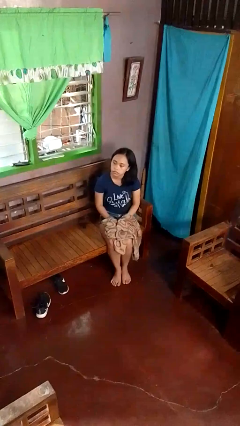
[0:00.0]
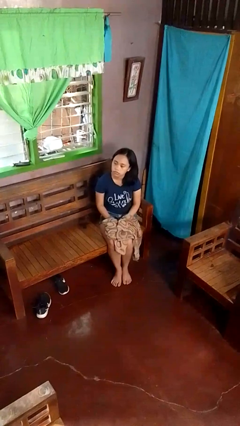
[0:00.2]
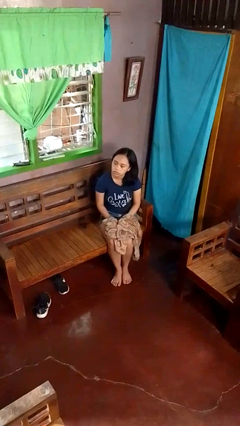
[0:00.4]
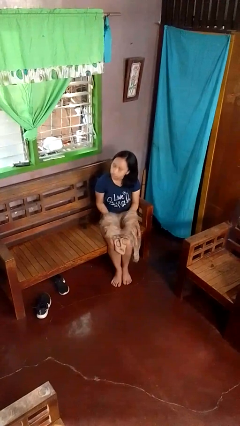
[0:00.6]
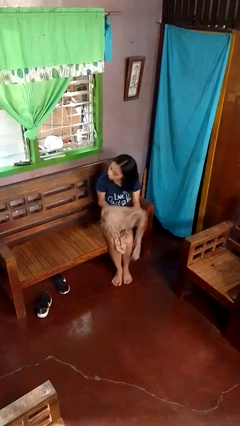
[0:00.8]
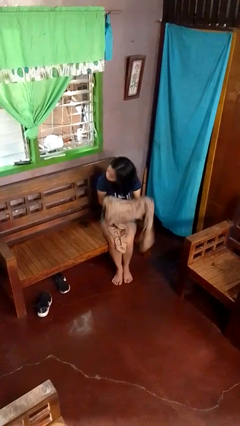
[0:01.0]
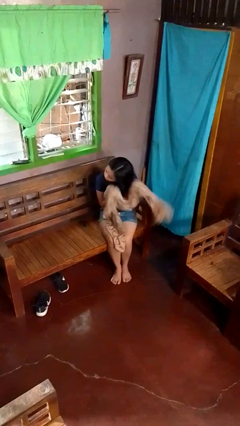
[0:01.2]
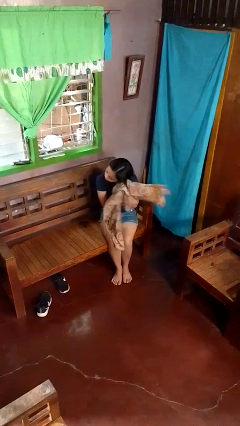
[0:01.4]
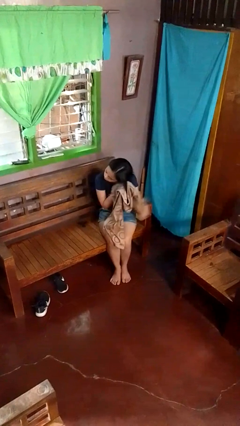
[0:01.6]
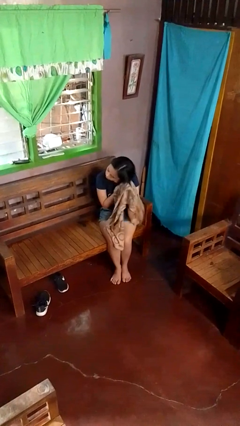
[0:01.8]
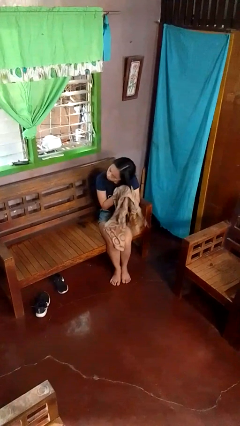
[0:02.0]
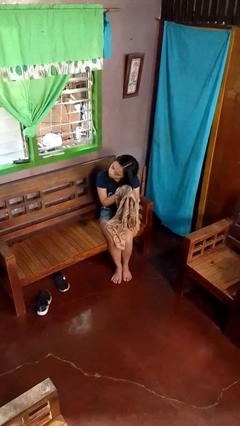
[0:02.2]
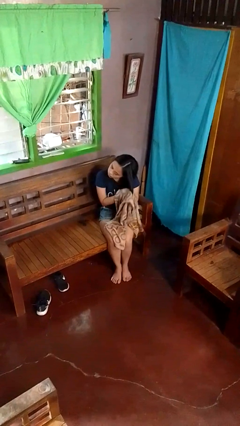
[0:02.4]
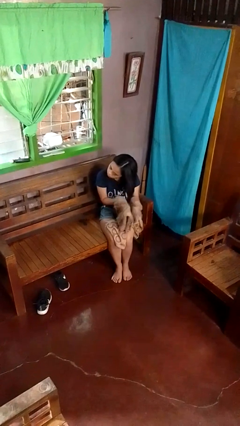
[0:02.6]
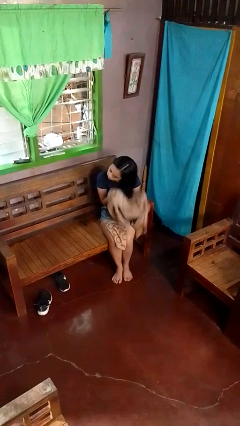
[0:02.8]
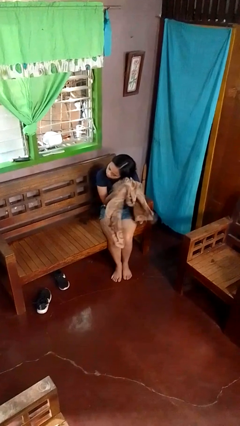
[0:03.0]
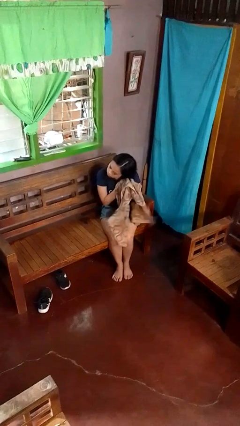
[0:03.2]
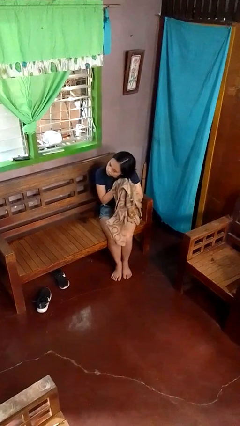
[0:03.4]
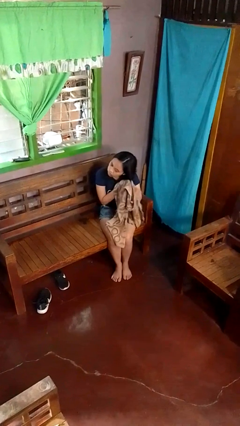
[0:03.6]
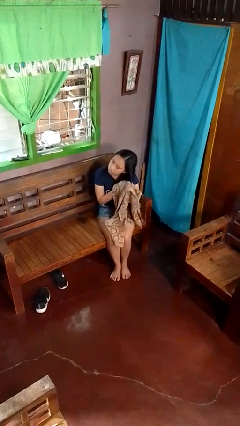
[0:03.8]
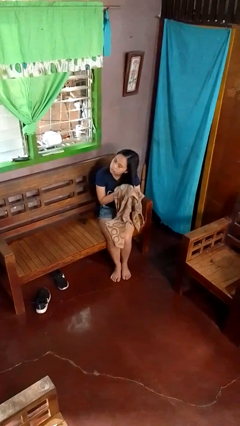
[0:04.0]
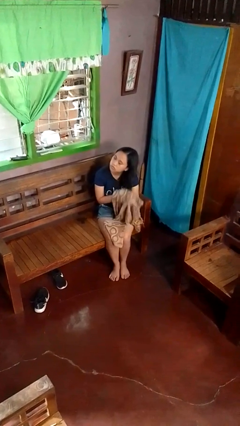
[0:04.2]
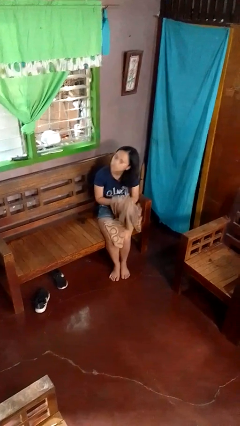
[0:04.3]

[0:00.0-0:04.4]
person dries hair with towel

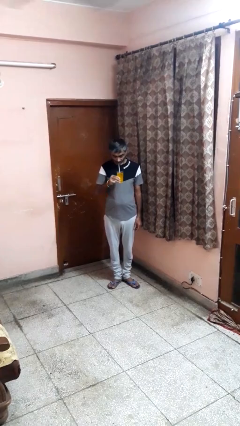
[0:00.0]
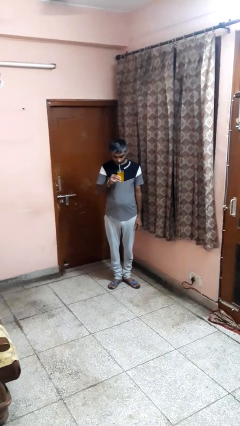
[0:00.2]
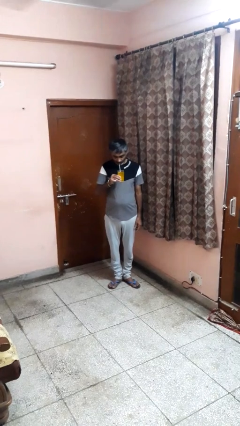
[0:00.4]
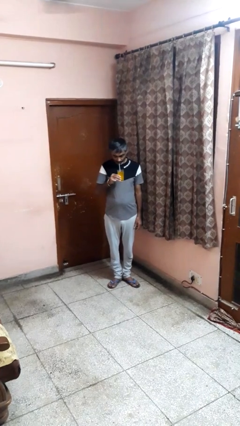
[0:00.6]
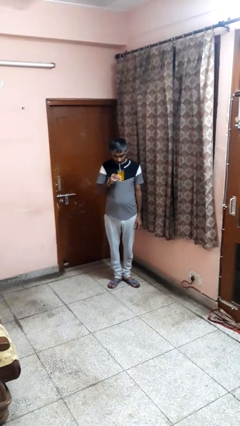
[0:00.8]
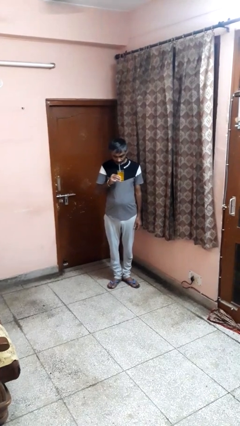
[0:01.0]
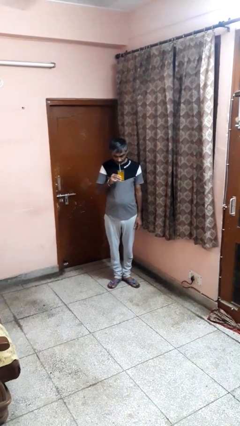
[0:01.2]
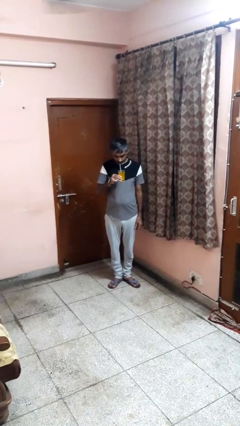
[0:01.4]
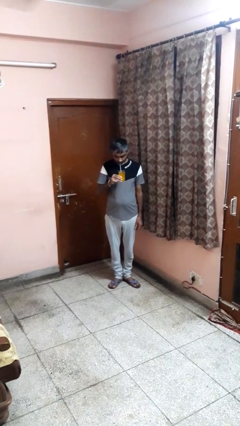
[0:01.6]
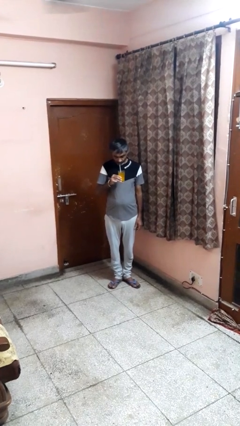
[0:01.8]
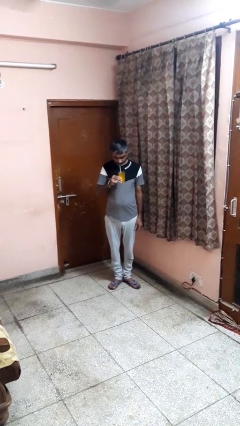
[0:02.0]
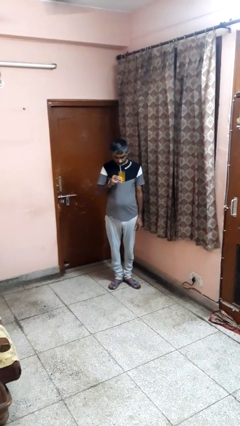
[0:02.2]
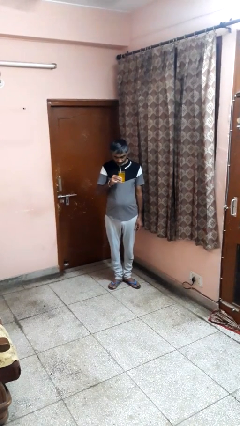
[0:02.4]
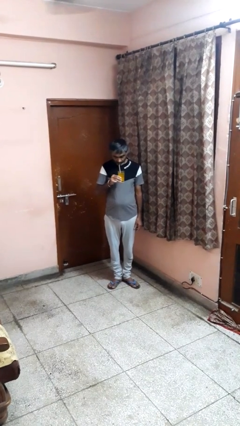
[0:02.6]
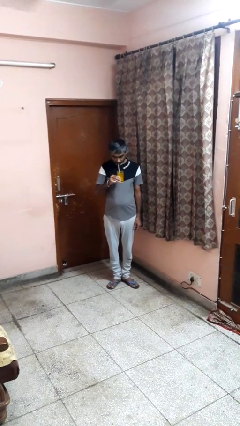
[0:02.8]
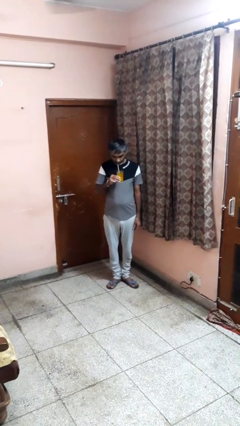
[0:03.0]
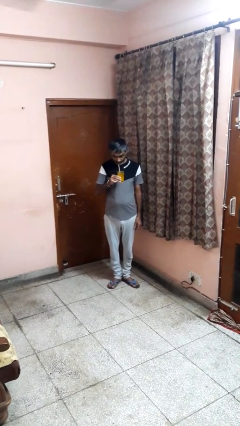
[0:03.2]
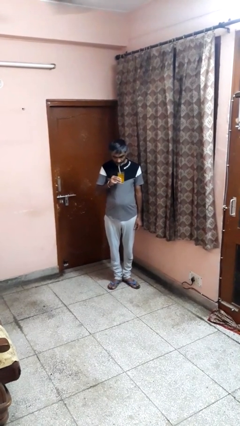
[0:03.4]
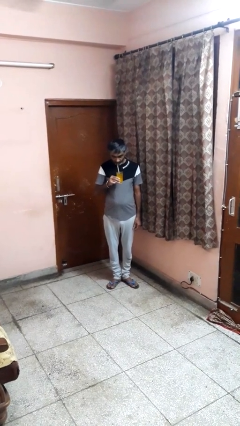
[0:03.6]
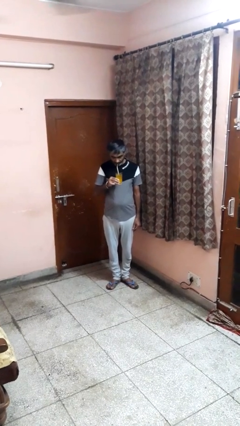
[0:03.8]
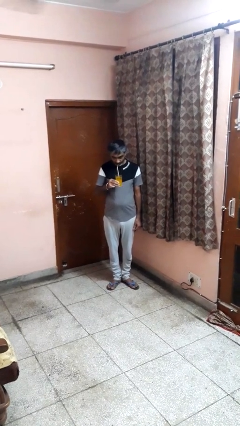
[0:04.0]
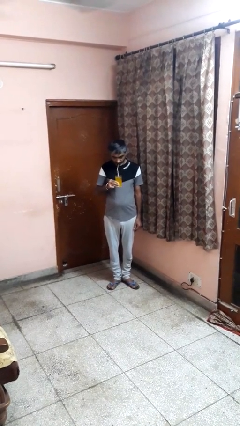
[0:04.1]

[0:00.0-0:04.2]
person drinks from straw

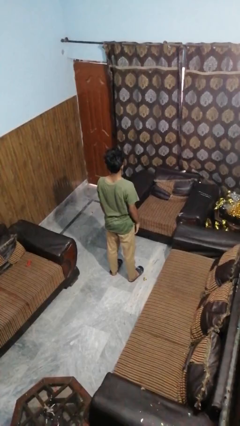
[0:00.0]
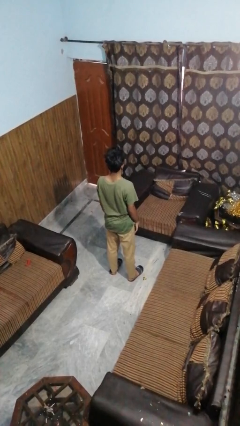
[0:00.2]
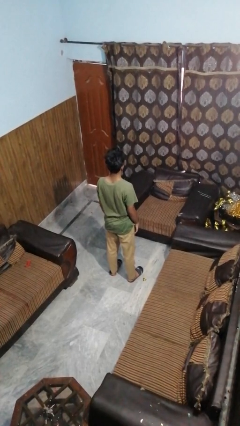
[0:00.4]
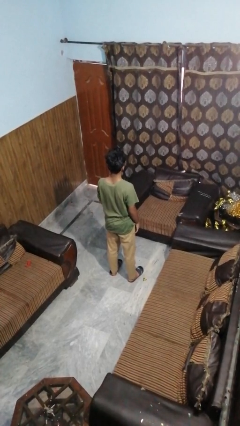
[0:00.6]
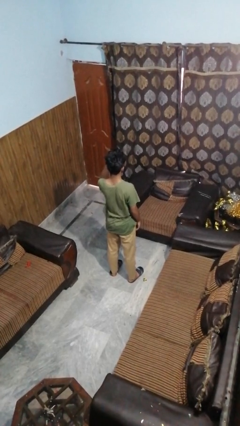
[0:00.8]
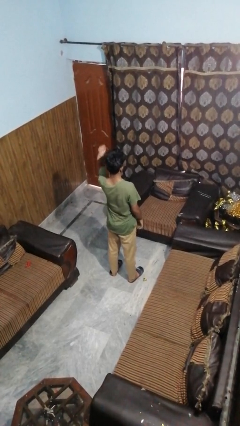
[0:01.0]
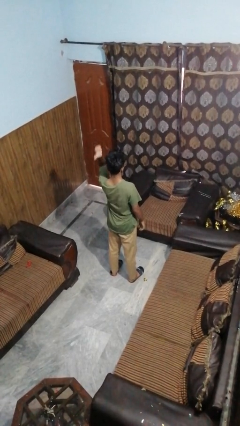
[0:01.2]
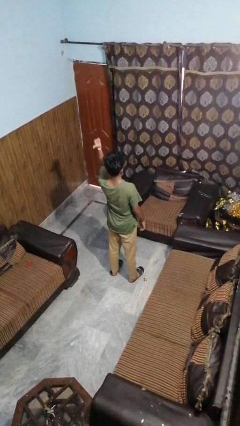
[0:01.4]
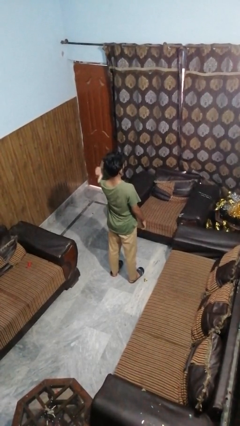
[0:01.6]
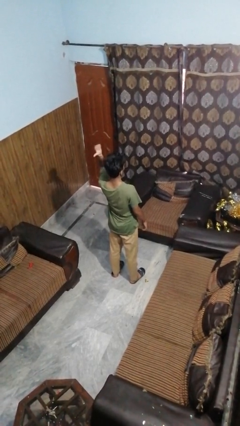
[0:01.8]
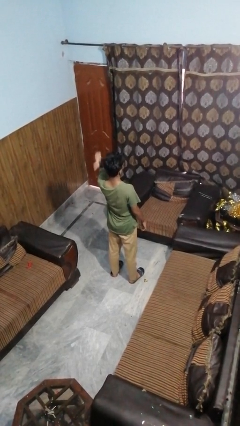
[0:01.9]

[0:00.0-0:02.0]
person gestures behind me

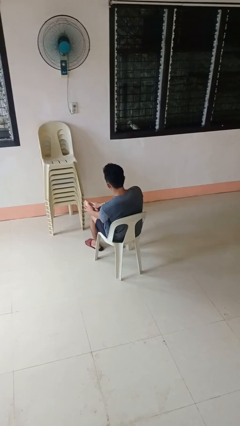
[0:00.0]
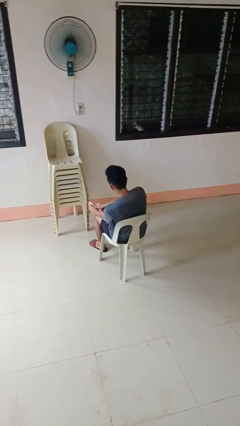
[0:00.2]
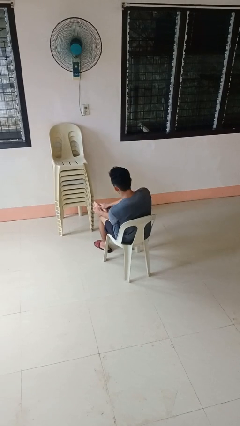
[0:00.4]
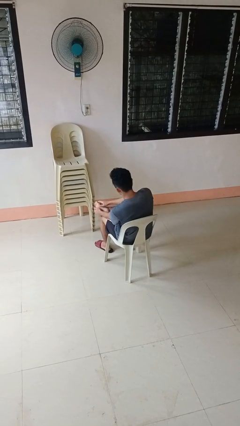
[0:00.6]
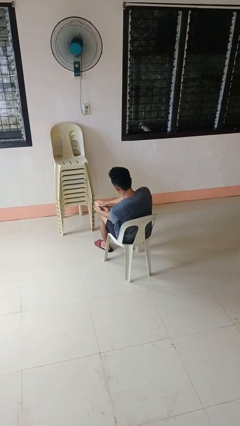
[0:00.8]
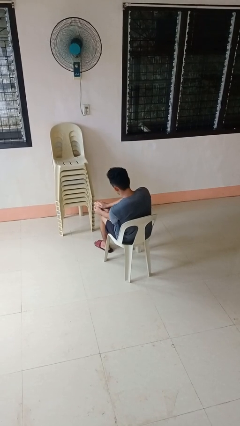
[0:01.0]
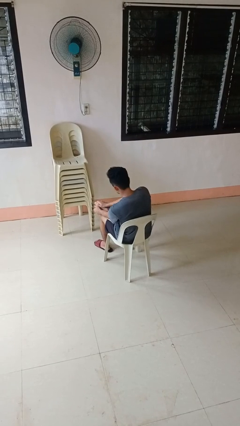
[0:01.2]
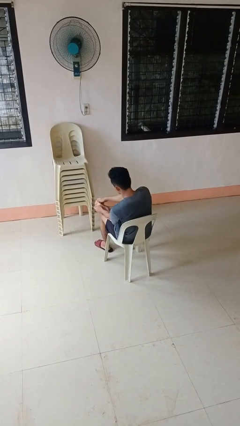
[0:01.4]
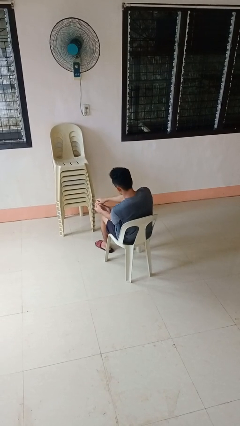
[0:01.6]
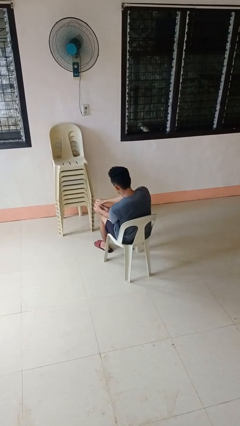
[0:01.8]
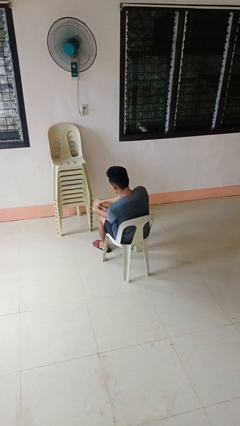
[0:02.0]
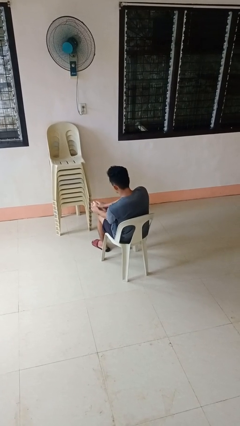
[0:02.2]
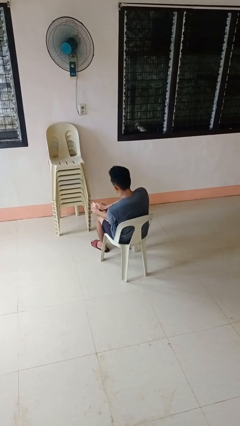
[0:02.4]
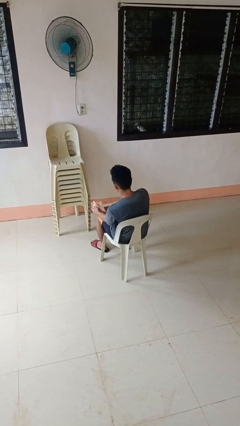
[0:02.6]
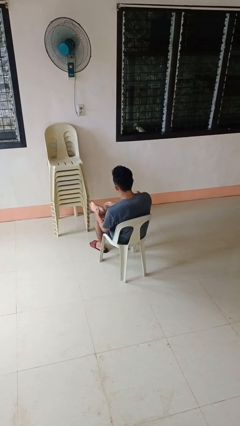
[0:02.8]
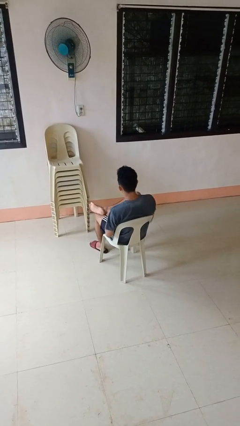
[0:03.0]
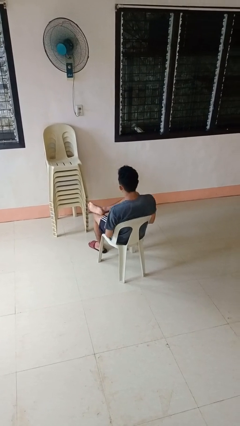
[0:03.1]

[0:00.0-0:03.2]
person rubs foot

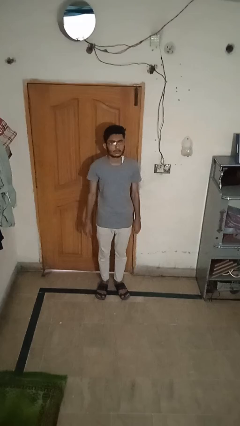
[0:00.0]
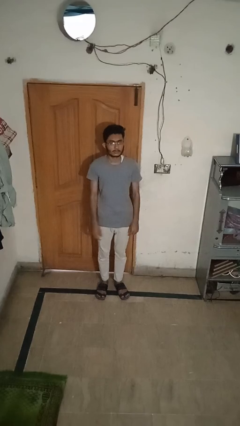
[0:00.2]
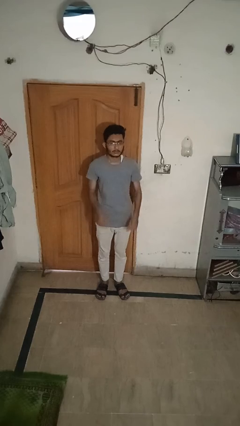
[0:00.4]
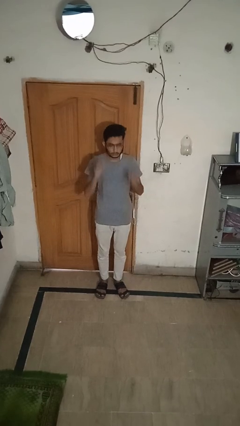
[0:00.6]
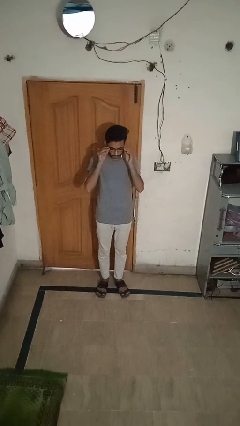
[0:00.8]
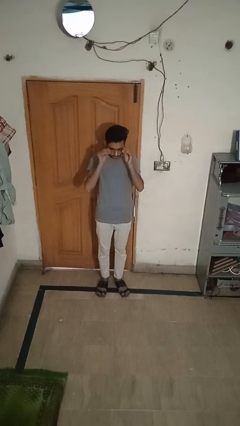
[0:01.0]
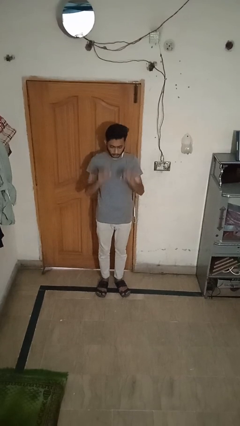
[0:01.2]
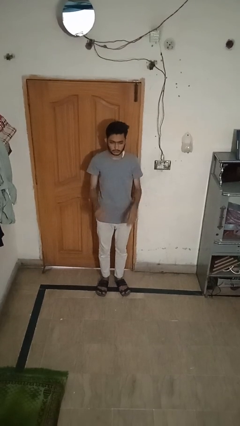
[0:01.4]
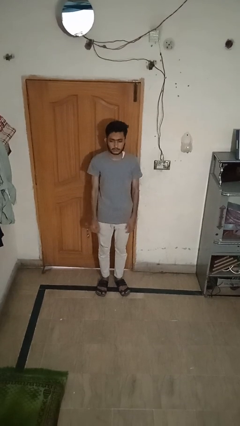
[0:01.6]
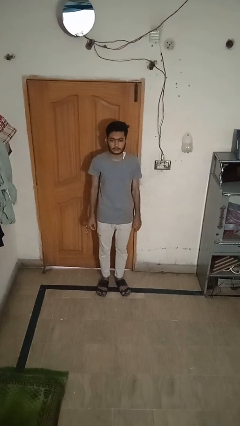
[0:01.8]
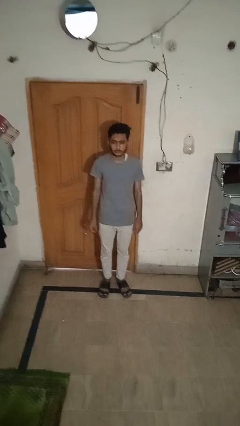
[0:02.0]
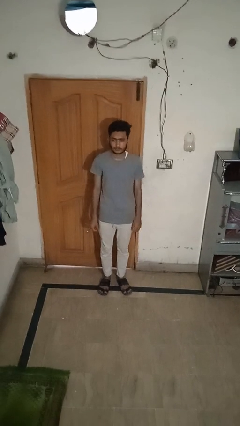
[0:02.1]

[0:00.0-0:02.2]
person takes off glasses

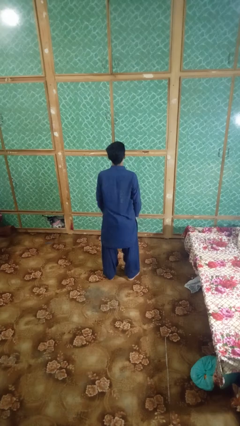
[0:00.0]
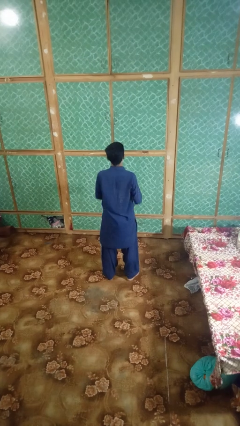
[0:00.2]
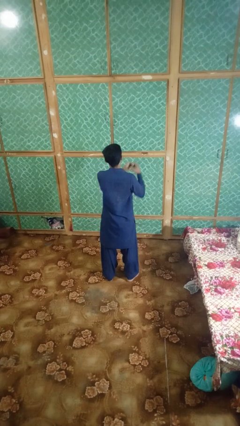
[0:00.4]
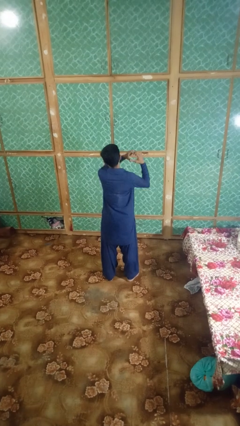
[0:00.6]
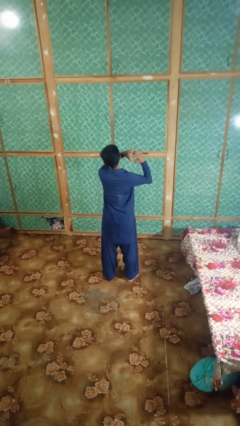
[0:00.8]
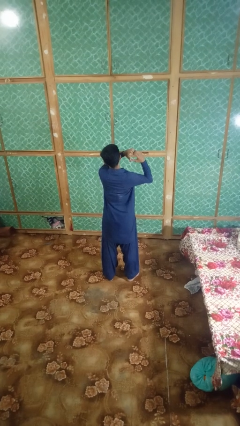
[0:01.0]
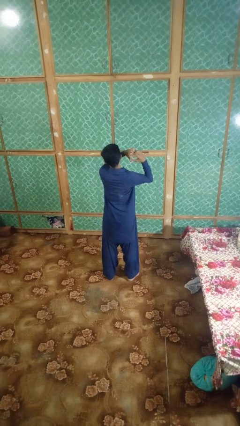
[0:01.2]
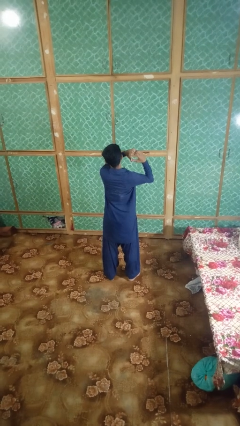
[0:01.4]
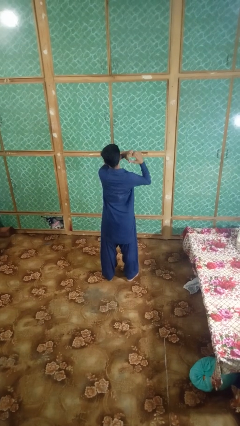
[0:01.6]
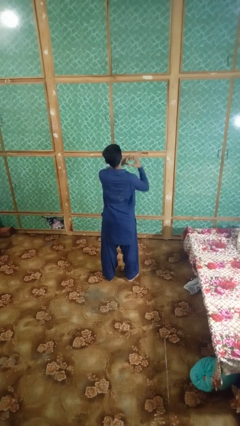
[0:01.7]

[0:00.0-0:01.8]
person gestures heart
